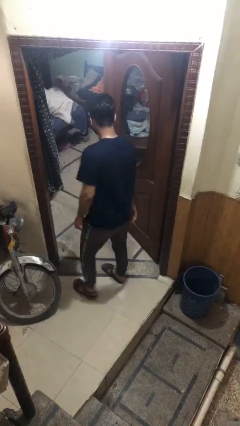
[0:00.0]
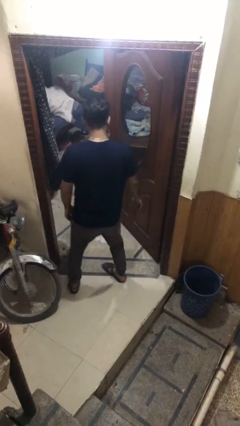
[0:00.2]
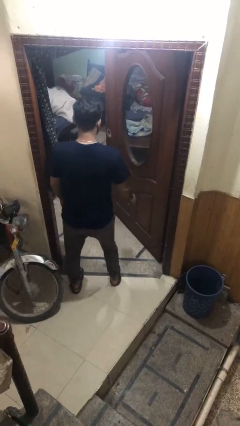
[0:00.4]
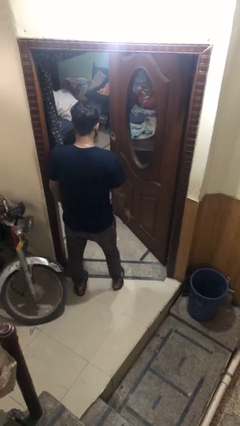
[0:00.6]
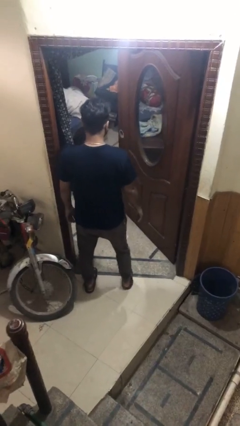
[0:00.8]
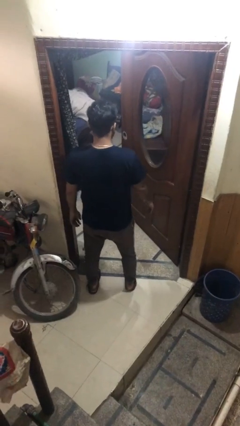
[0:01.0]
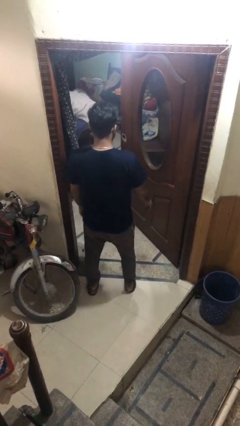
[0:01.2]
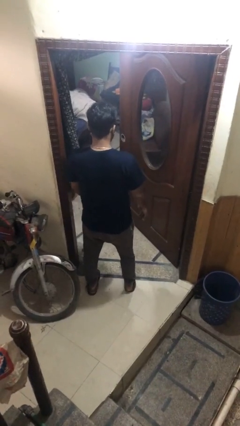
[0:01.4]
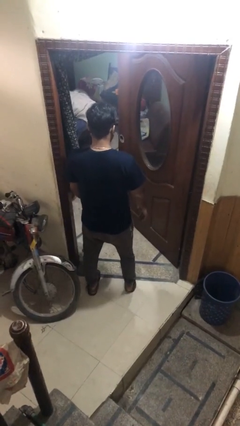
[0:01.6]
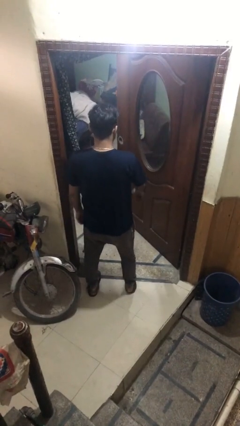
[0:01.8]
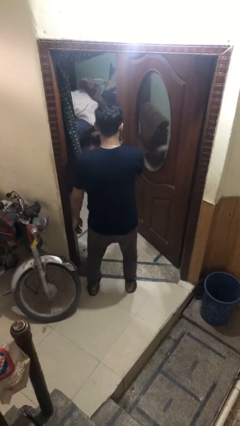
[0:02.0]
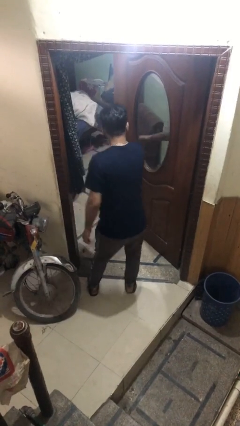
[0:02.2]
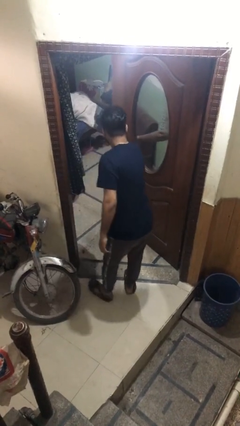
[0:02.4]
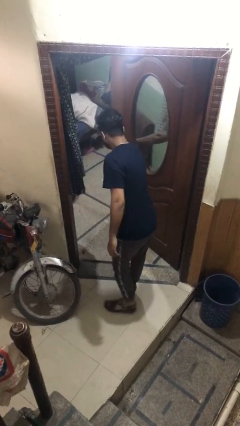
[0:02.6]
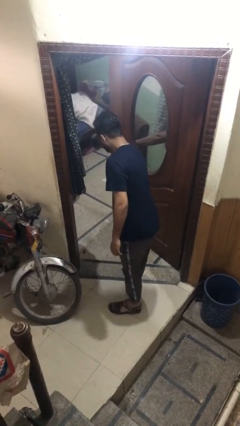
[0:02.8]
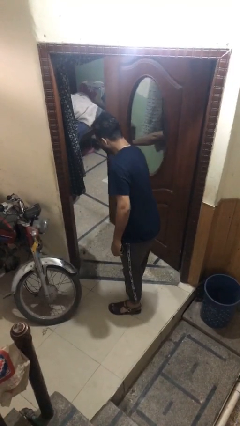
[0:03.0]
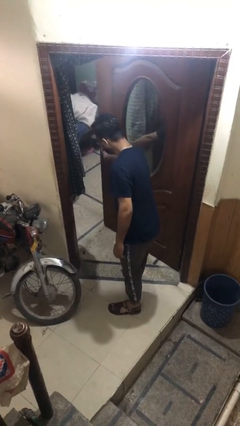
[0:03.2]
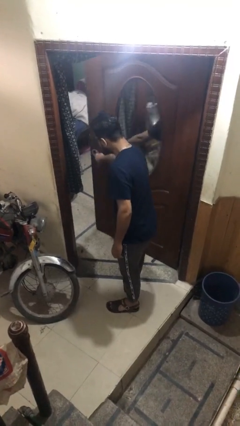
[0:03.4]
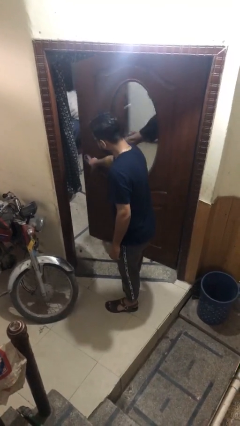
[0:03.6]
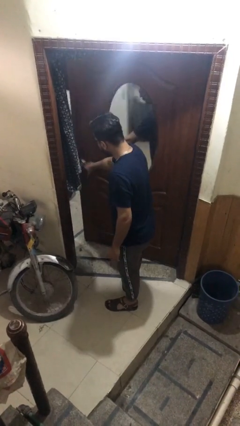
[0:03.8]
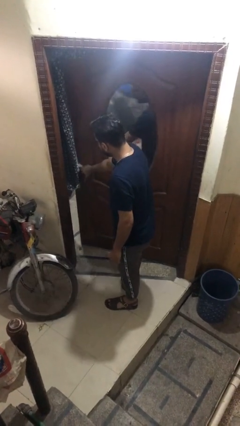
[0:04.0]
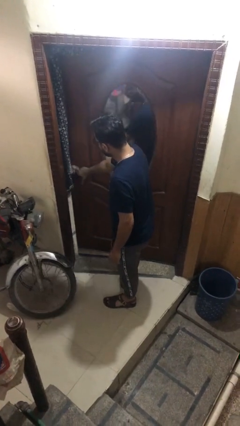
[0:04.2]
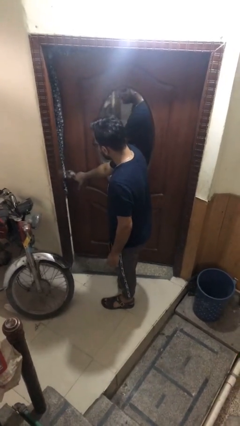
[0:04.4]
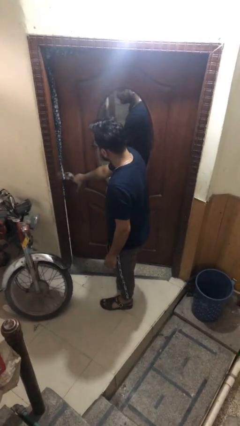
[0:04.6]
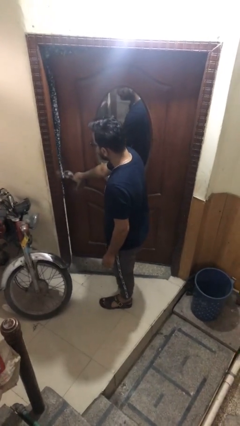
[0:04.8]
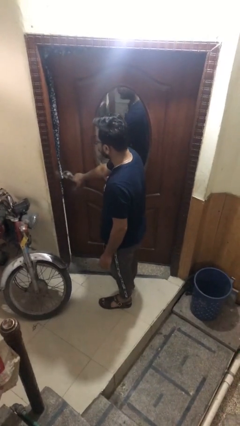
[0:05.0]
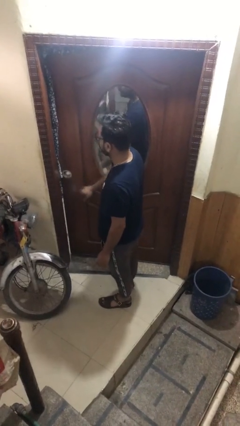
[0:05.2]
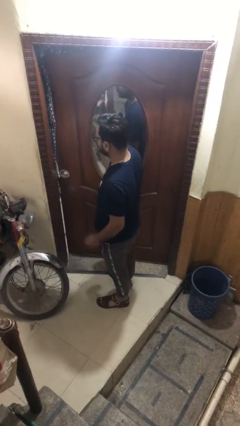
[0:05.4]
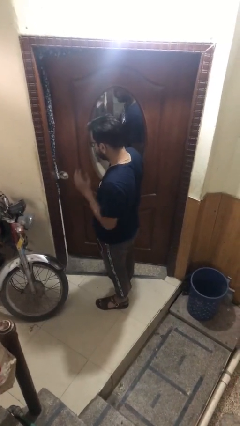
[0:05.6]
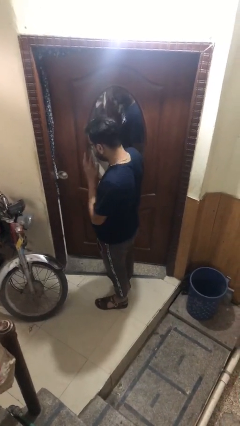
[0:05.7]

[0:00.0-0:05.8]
person closes facility door

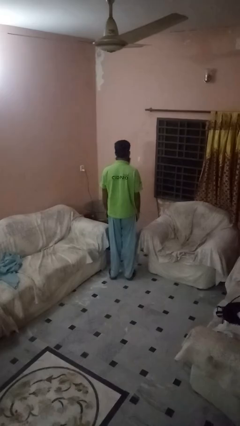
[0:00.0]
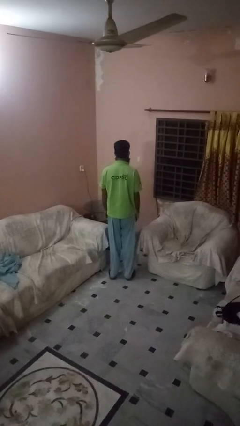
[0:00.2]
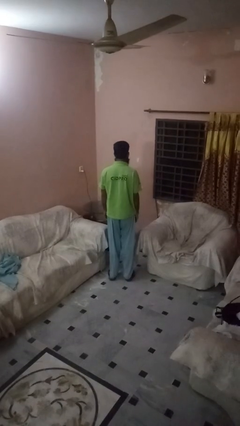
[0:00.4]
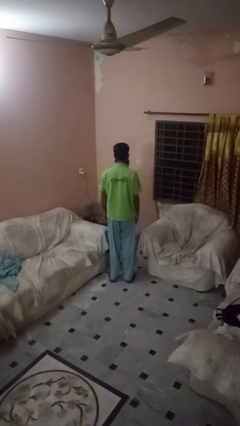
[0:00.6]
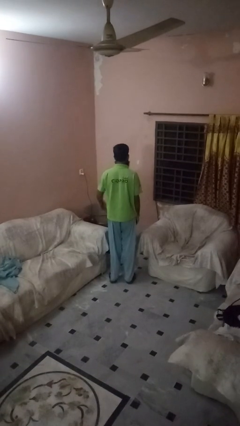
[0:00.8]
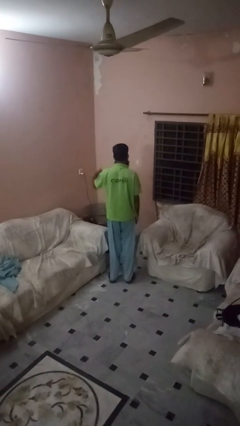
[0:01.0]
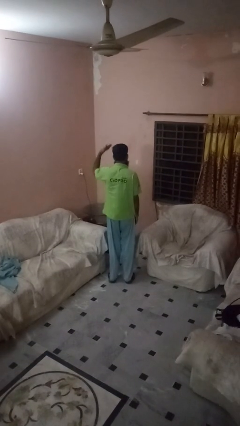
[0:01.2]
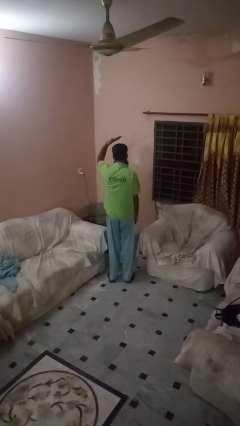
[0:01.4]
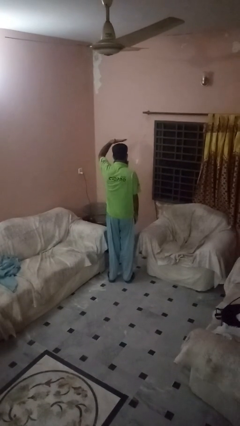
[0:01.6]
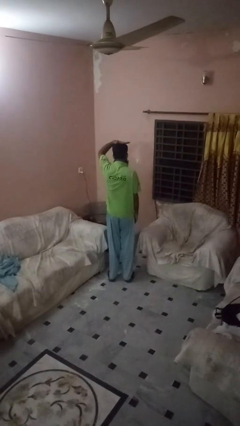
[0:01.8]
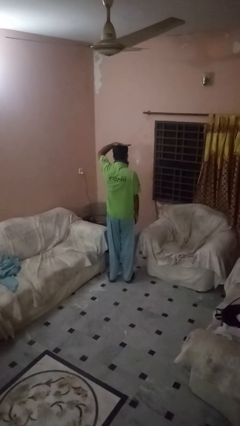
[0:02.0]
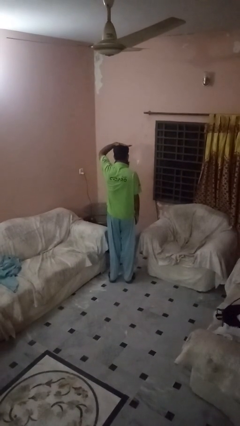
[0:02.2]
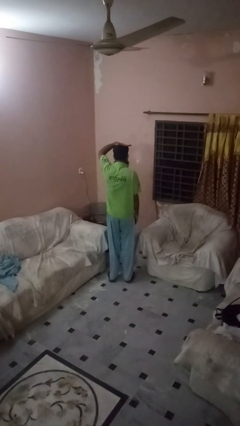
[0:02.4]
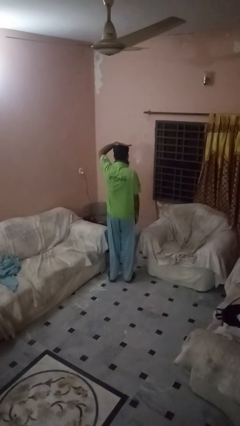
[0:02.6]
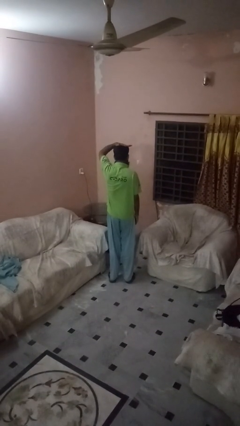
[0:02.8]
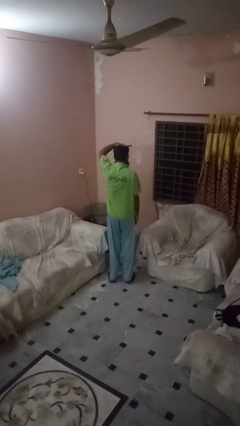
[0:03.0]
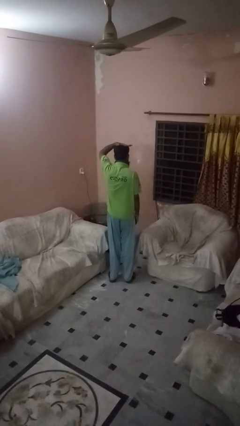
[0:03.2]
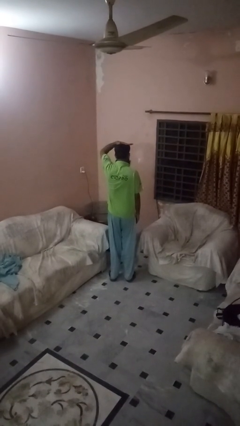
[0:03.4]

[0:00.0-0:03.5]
person pats head

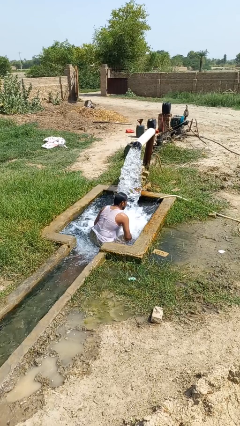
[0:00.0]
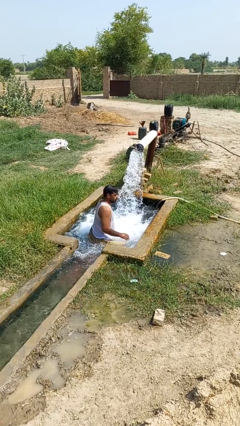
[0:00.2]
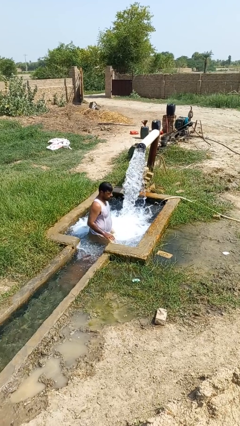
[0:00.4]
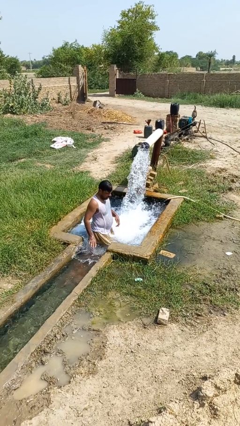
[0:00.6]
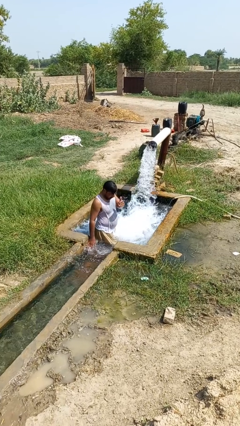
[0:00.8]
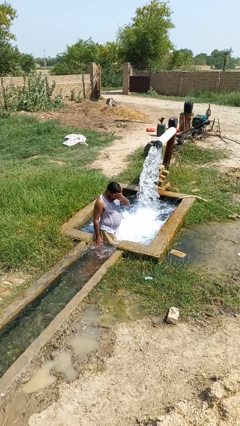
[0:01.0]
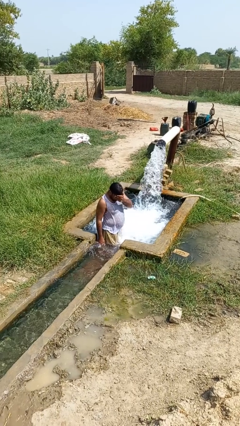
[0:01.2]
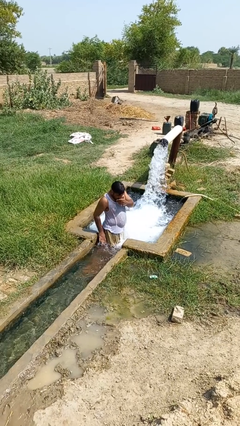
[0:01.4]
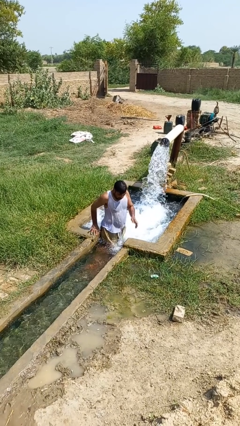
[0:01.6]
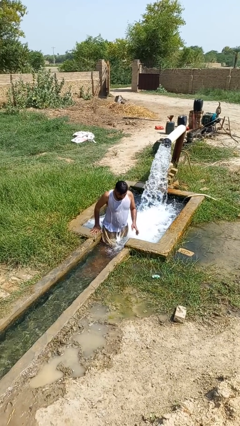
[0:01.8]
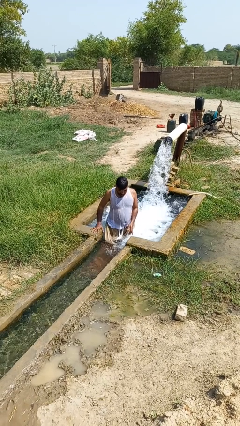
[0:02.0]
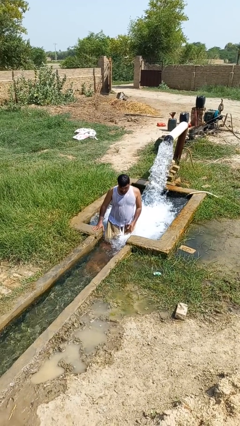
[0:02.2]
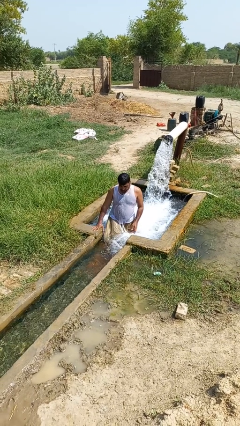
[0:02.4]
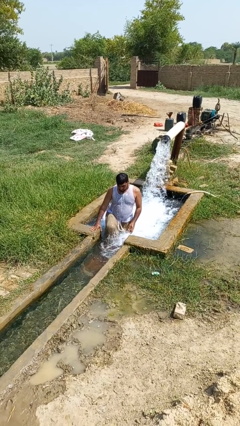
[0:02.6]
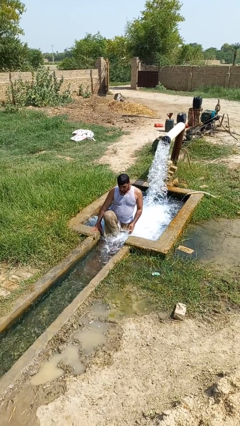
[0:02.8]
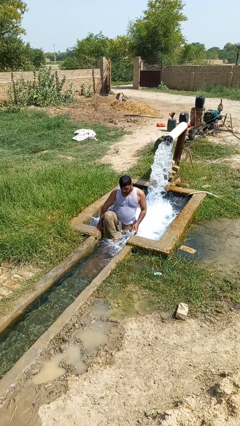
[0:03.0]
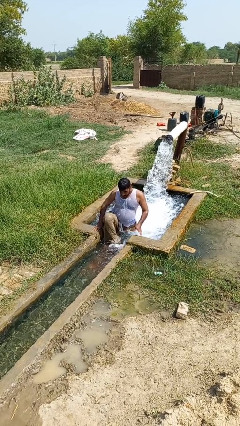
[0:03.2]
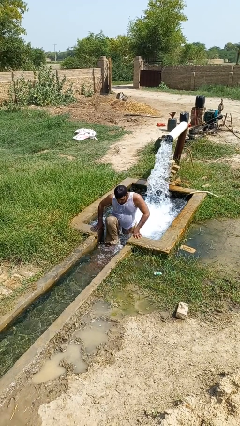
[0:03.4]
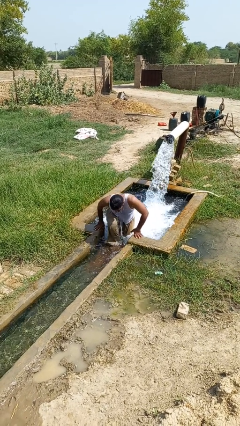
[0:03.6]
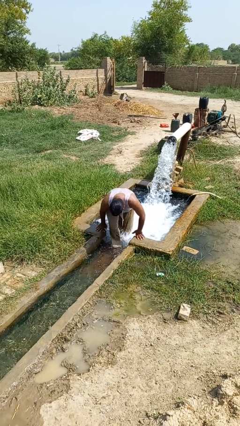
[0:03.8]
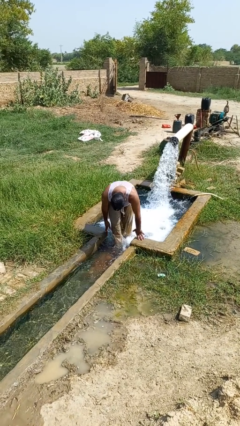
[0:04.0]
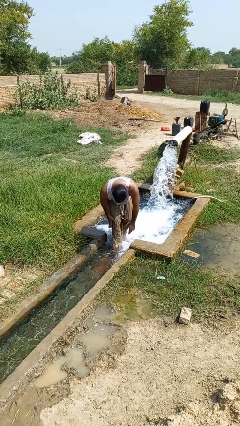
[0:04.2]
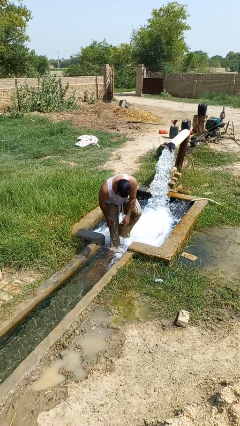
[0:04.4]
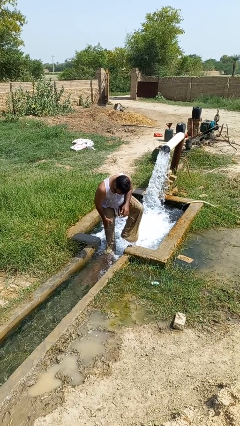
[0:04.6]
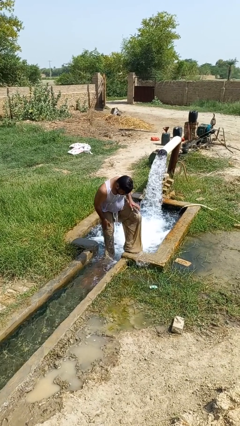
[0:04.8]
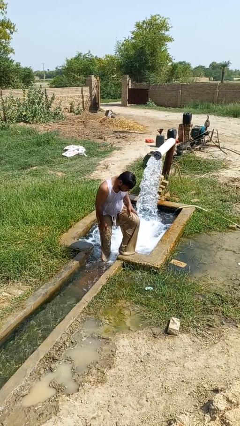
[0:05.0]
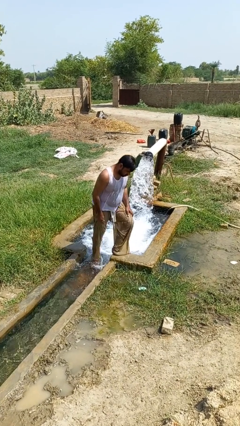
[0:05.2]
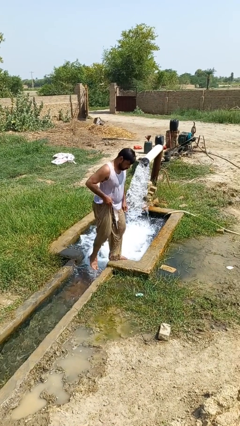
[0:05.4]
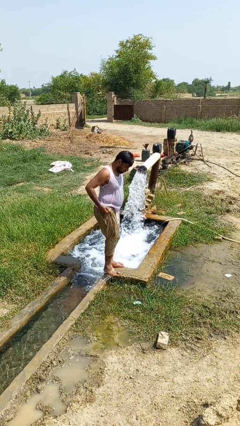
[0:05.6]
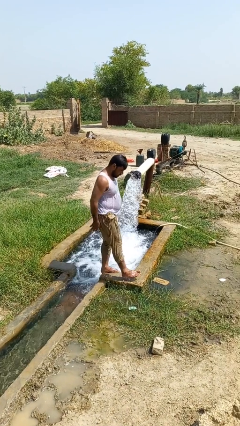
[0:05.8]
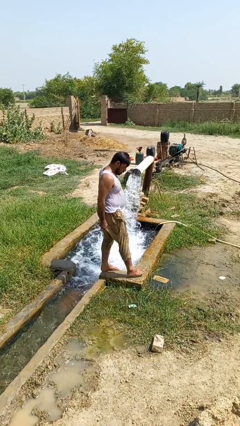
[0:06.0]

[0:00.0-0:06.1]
person exits pool

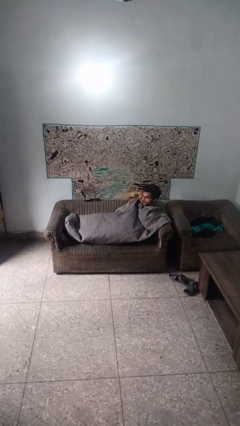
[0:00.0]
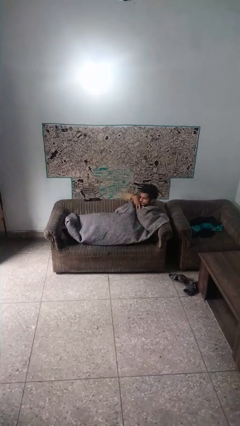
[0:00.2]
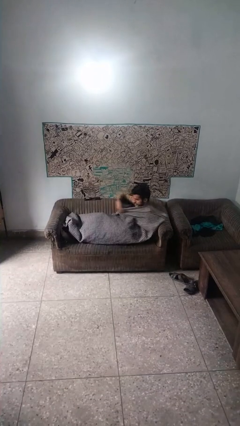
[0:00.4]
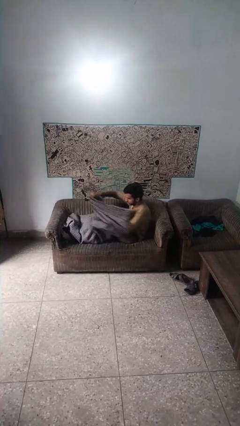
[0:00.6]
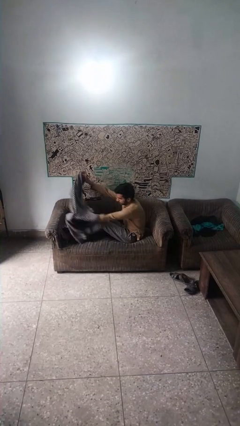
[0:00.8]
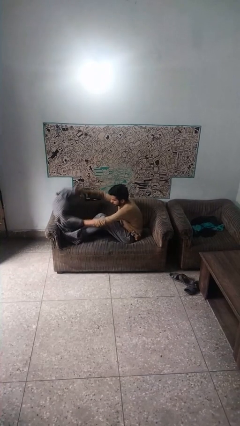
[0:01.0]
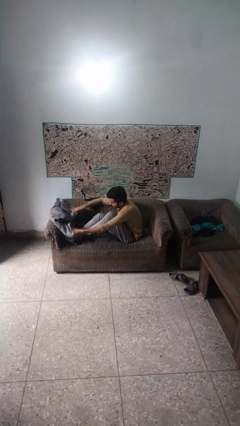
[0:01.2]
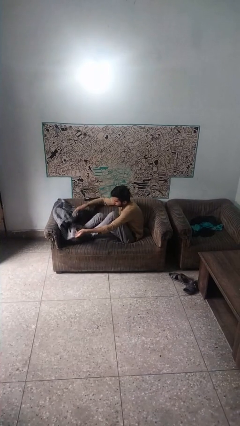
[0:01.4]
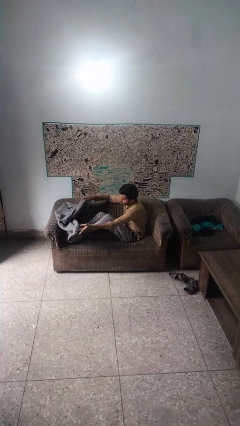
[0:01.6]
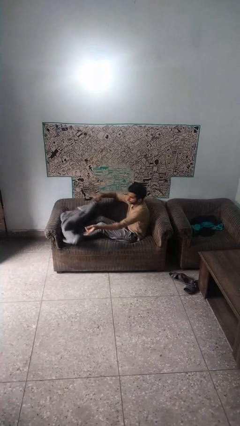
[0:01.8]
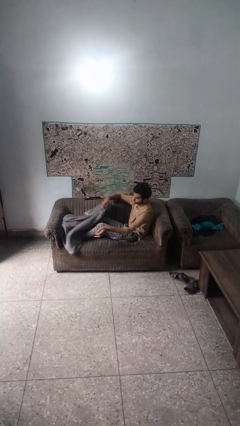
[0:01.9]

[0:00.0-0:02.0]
person uncovers with blanket

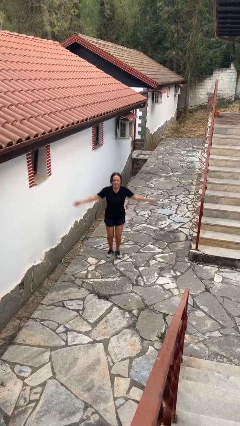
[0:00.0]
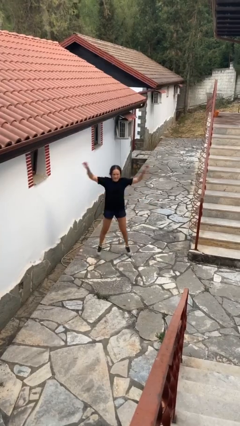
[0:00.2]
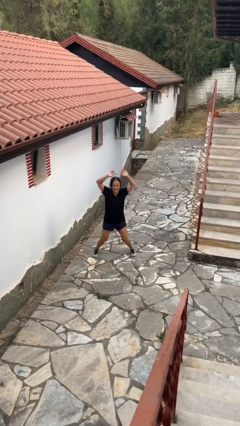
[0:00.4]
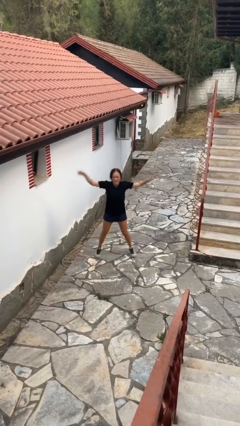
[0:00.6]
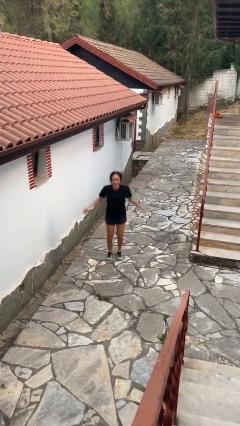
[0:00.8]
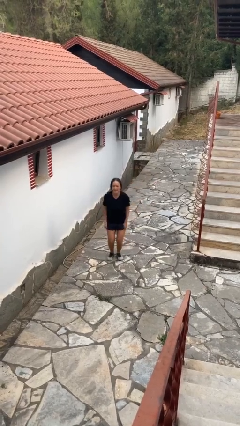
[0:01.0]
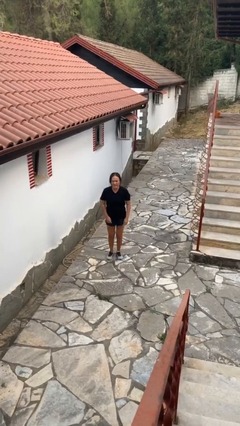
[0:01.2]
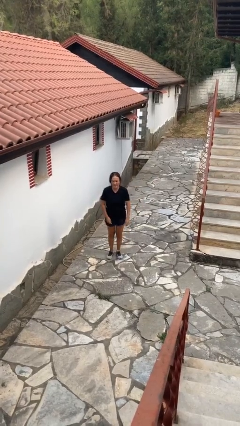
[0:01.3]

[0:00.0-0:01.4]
person exercises with jumping jacks
